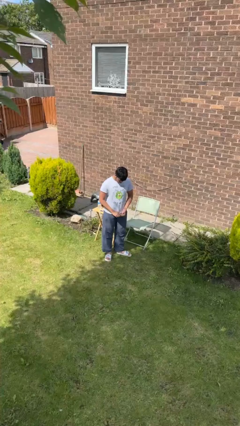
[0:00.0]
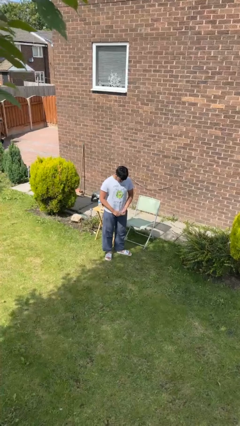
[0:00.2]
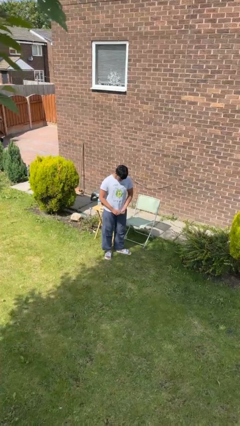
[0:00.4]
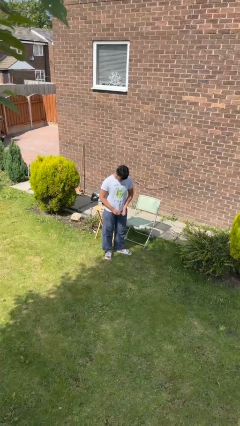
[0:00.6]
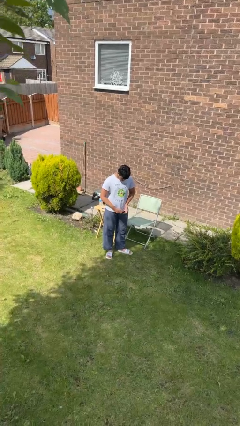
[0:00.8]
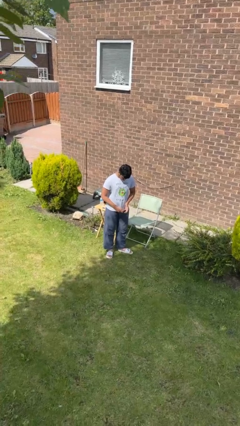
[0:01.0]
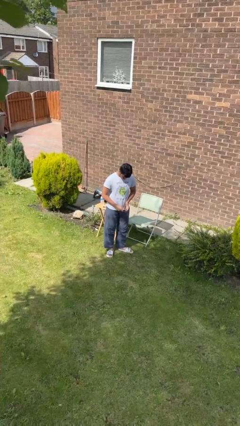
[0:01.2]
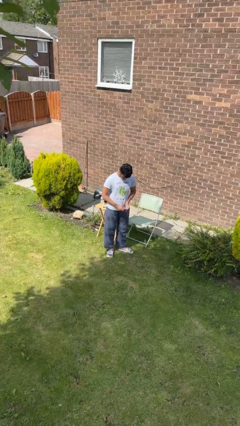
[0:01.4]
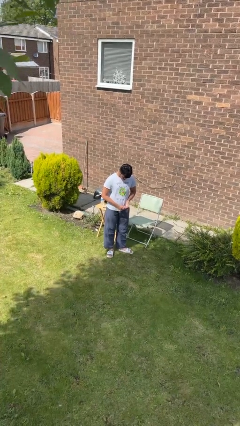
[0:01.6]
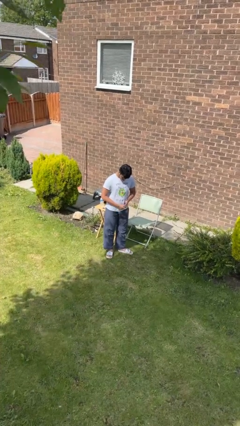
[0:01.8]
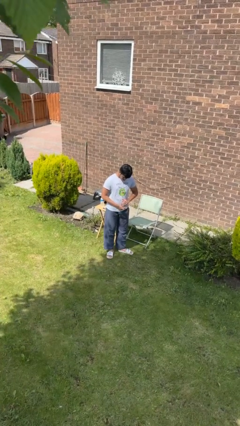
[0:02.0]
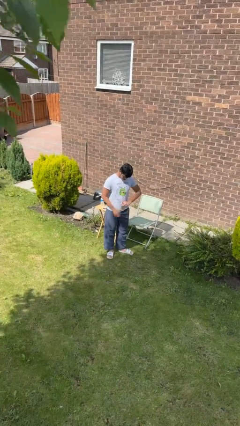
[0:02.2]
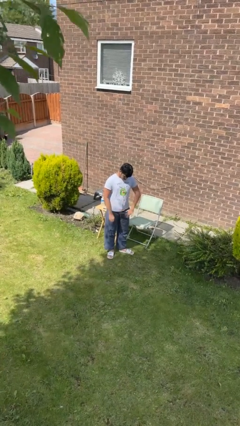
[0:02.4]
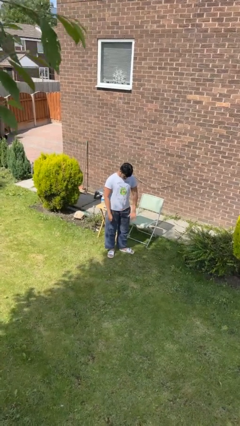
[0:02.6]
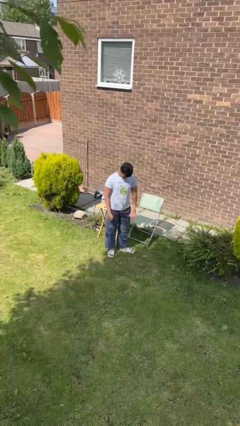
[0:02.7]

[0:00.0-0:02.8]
person puts on ring

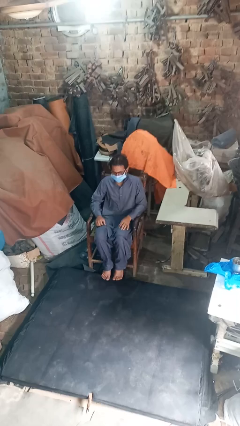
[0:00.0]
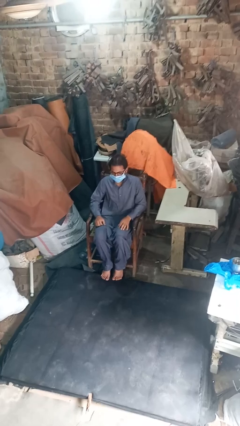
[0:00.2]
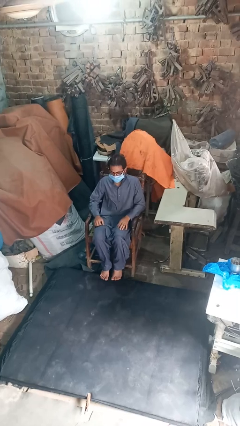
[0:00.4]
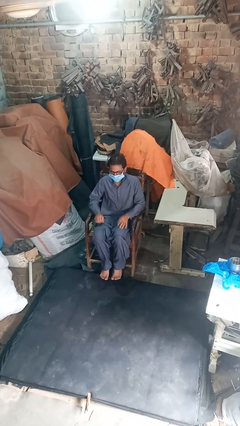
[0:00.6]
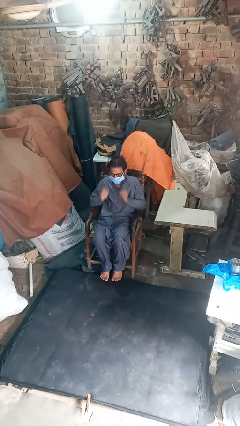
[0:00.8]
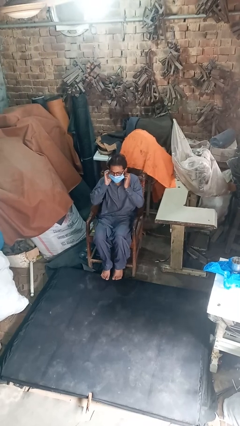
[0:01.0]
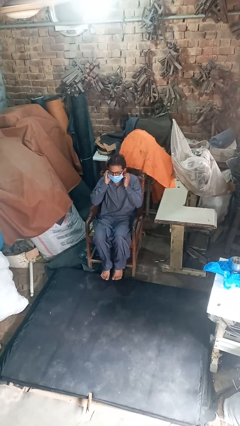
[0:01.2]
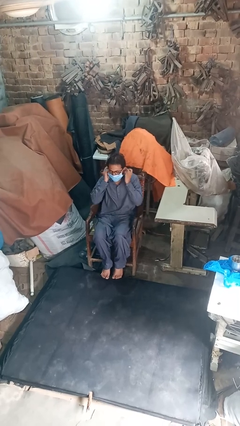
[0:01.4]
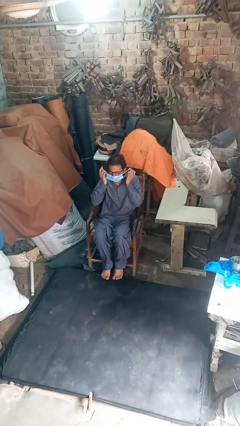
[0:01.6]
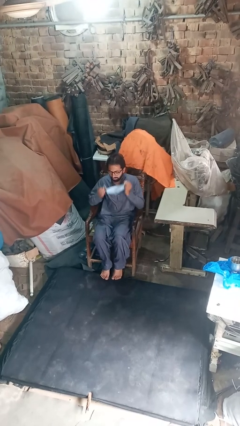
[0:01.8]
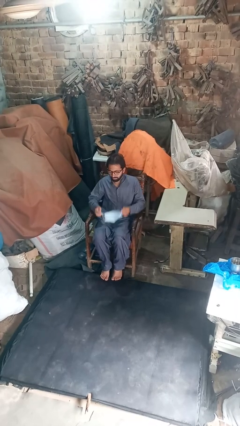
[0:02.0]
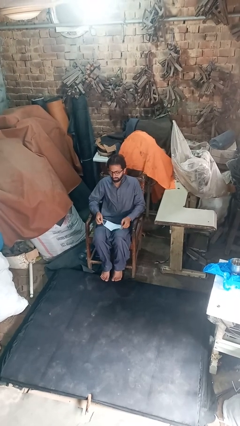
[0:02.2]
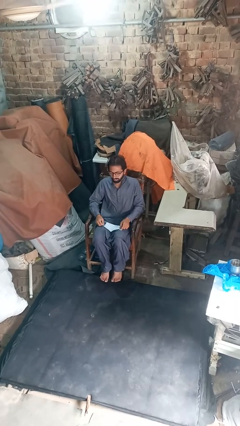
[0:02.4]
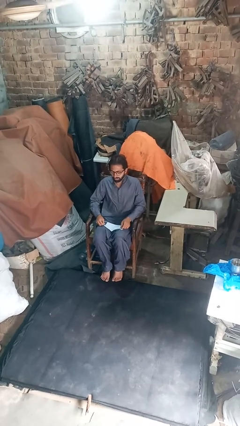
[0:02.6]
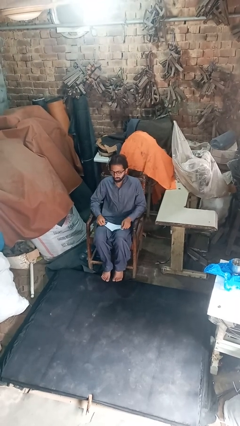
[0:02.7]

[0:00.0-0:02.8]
person takes off facemask

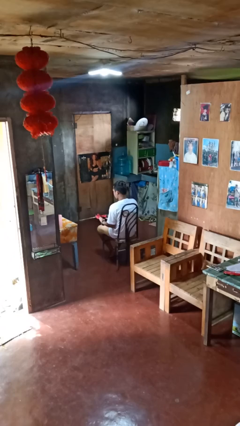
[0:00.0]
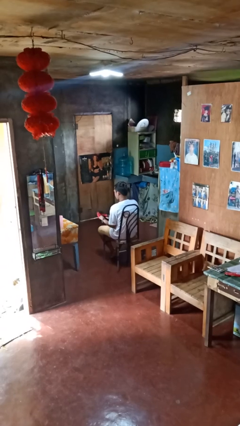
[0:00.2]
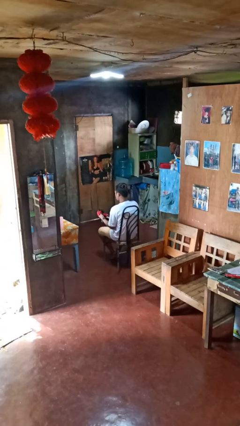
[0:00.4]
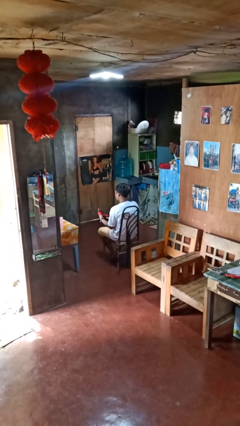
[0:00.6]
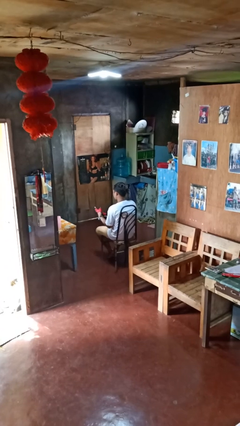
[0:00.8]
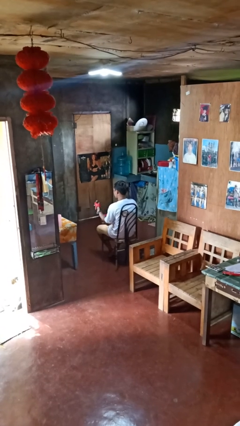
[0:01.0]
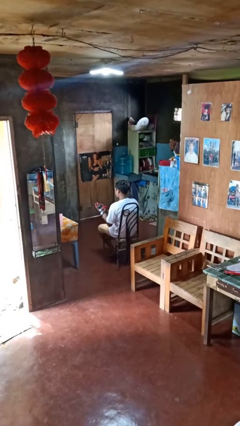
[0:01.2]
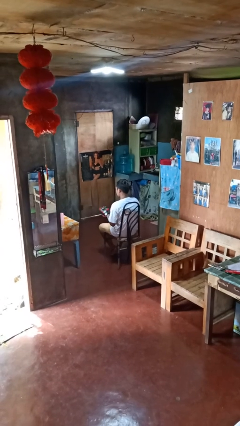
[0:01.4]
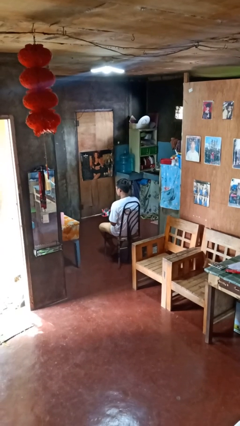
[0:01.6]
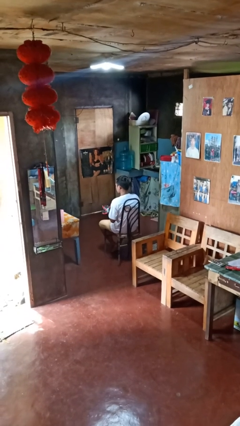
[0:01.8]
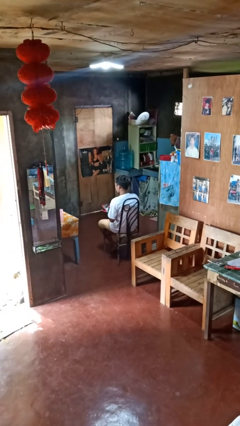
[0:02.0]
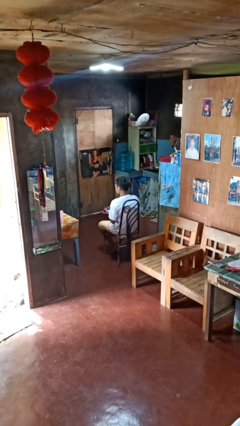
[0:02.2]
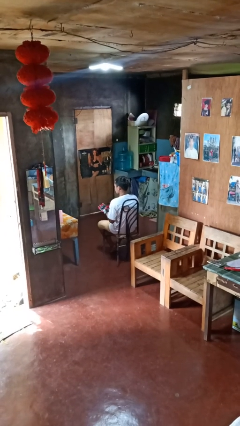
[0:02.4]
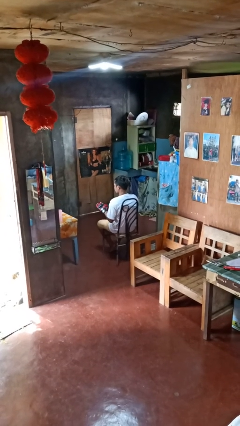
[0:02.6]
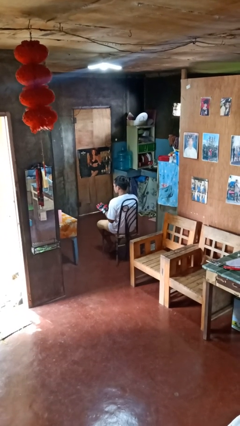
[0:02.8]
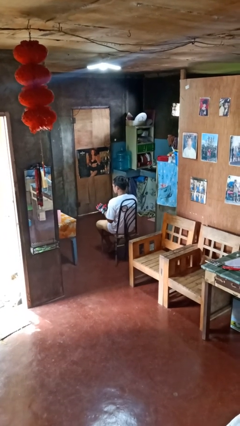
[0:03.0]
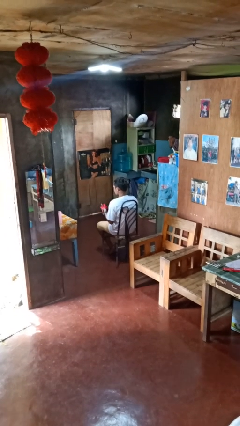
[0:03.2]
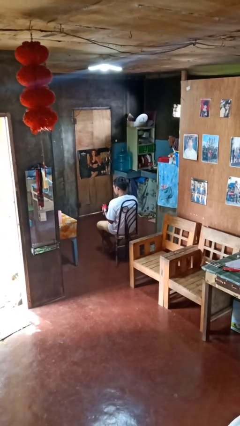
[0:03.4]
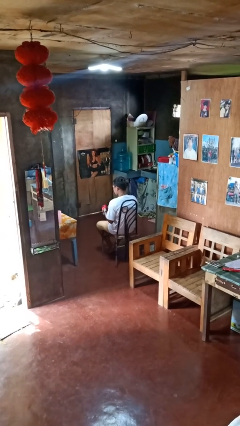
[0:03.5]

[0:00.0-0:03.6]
person puts on gloves

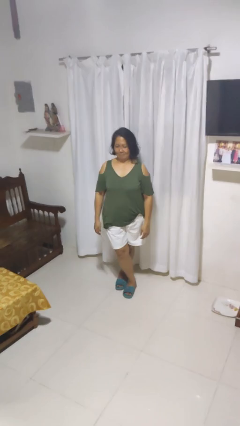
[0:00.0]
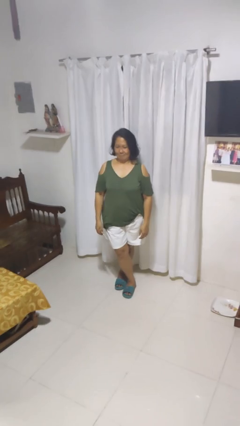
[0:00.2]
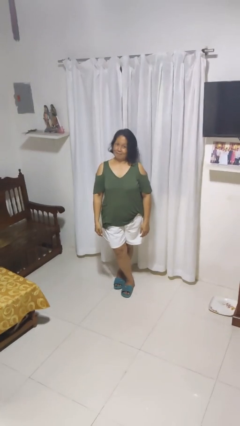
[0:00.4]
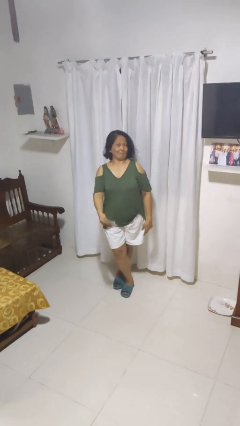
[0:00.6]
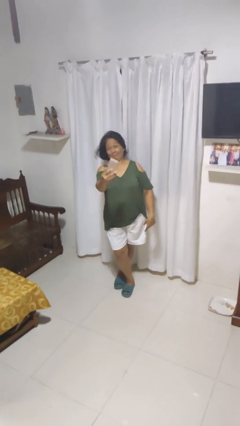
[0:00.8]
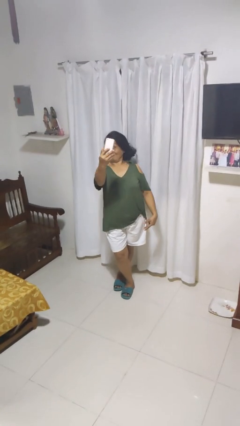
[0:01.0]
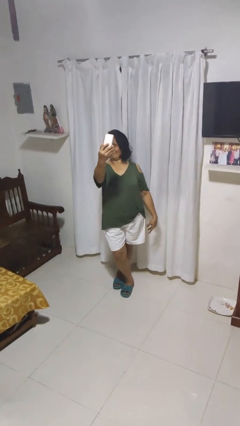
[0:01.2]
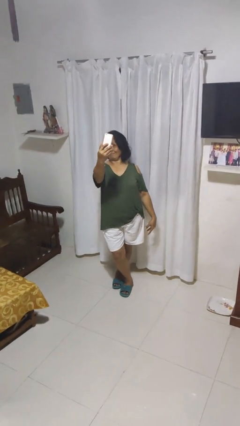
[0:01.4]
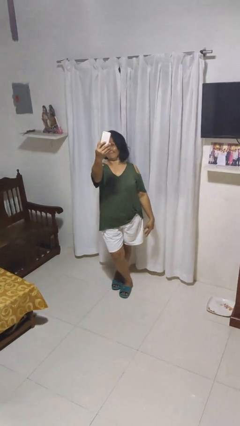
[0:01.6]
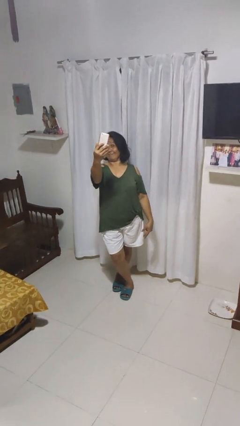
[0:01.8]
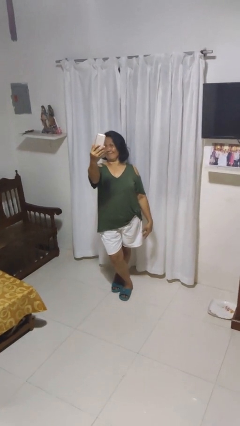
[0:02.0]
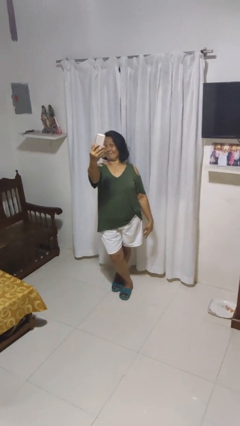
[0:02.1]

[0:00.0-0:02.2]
person takes selfie

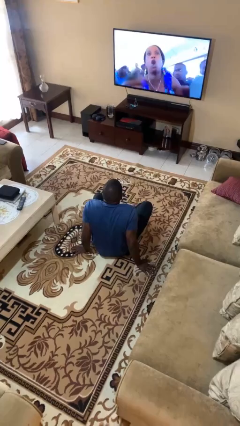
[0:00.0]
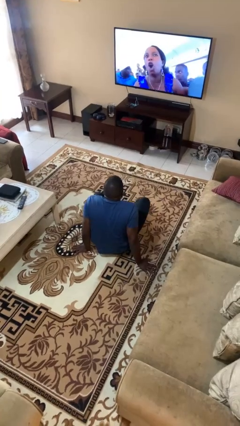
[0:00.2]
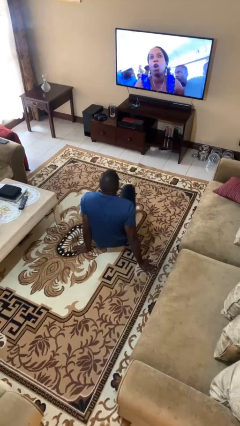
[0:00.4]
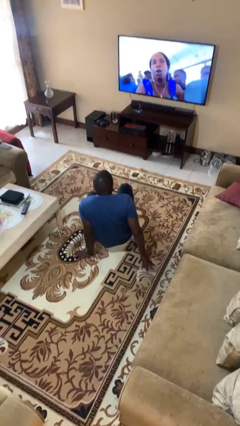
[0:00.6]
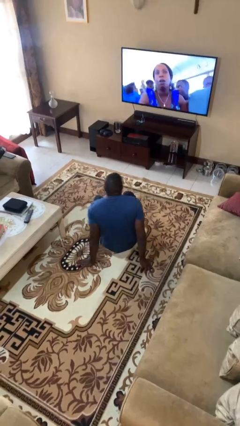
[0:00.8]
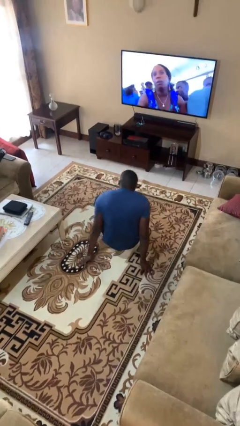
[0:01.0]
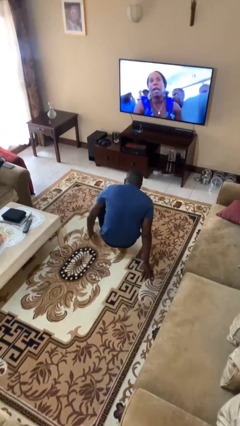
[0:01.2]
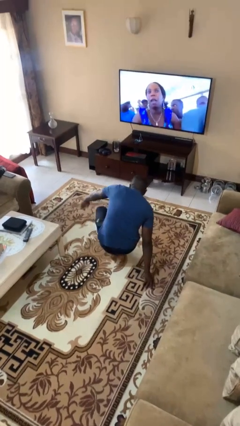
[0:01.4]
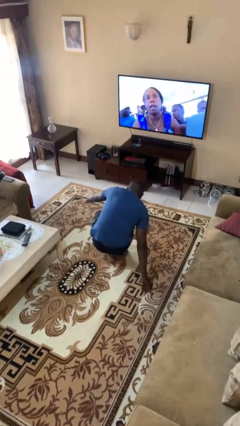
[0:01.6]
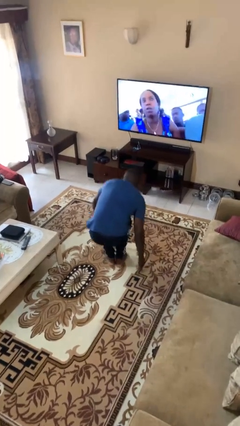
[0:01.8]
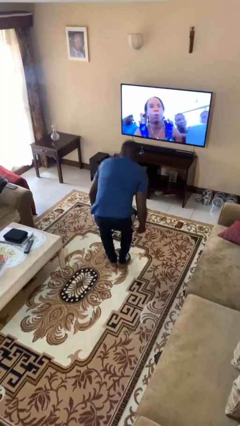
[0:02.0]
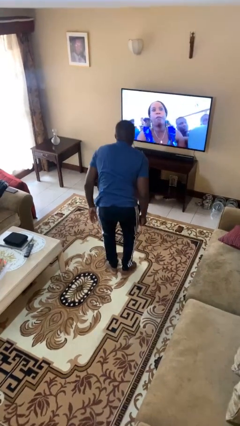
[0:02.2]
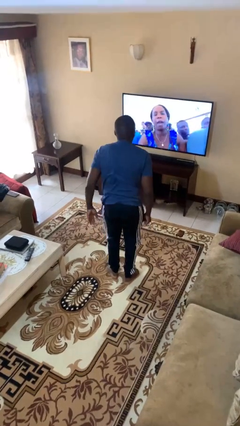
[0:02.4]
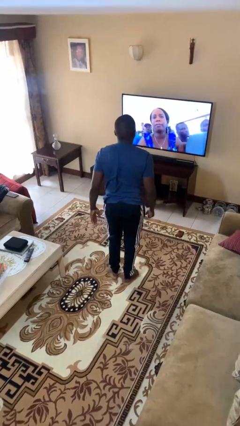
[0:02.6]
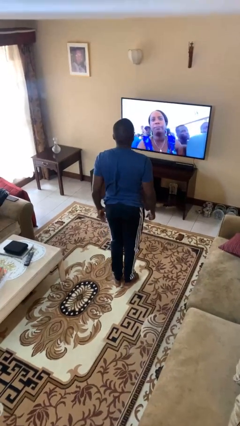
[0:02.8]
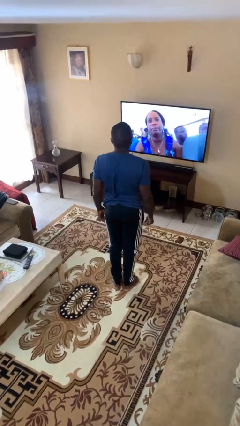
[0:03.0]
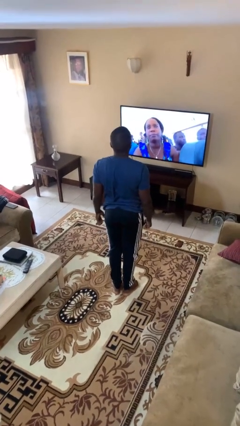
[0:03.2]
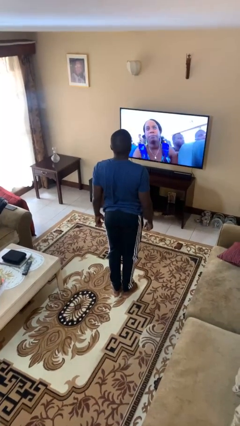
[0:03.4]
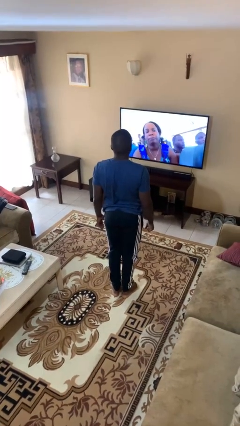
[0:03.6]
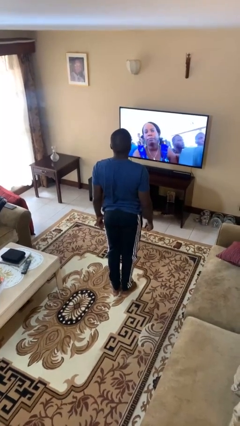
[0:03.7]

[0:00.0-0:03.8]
person stands up from floor

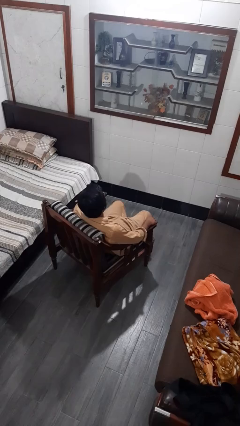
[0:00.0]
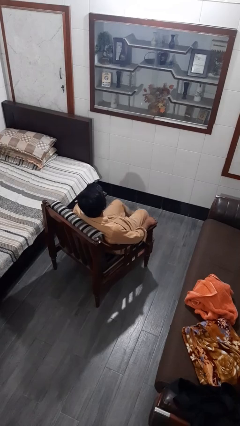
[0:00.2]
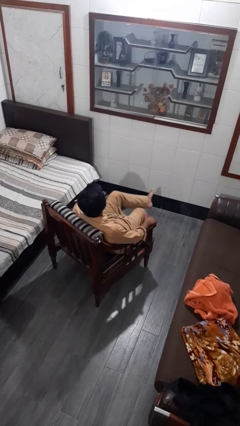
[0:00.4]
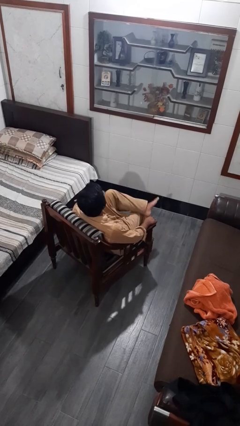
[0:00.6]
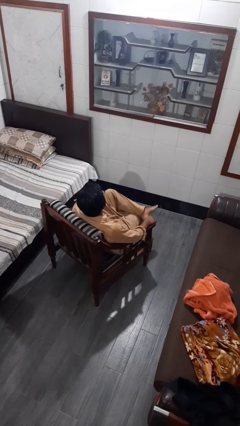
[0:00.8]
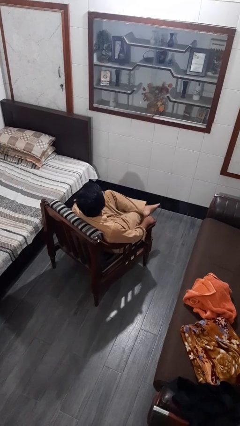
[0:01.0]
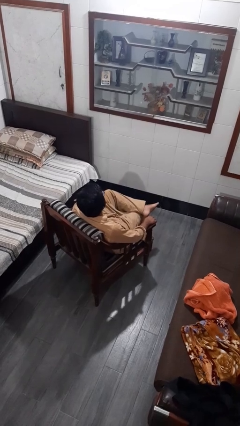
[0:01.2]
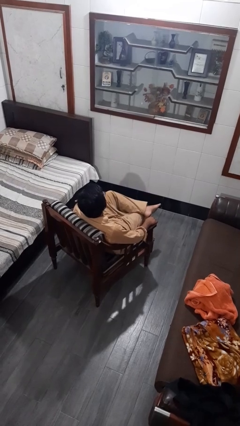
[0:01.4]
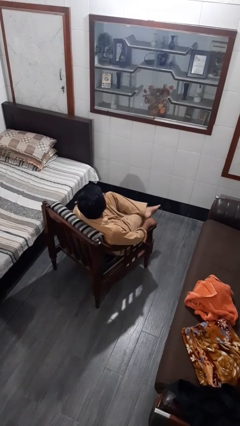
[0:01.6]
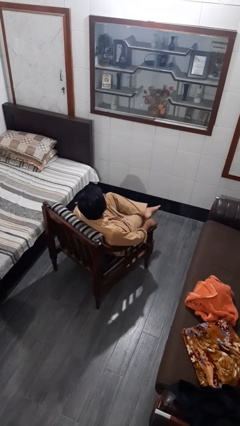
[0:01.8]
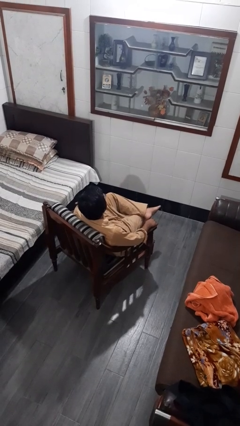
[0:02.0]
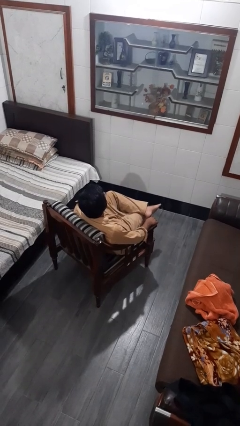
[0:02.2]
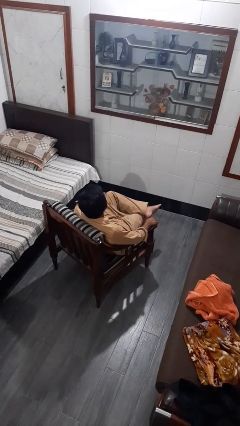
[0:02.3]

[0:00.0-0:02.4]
person crosses legs
